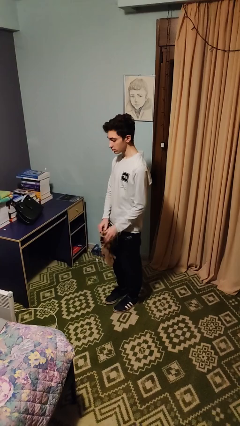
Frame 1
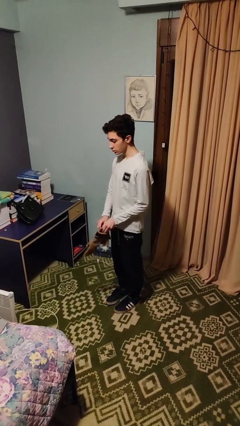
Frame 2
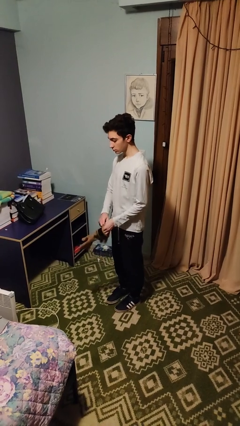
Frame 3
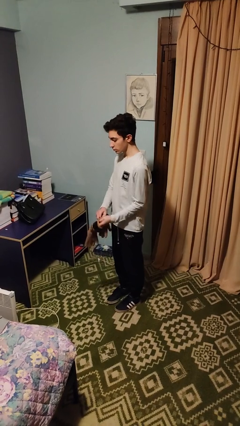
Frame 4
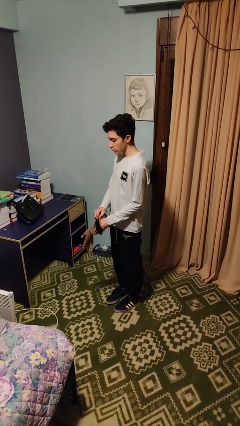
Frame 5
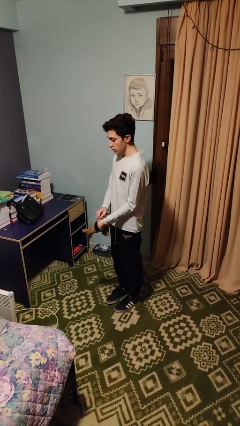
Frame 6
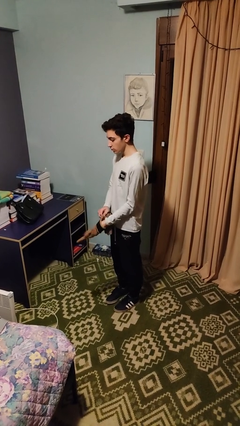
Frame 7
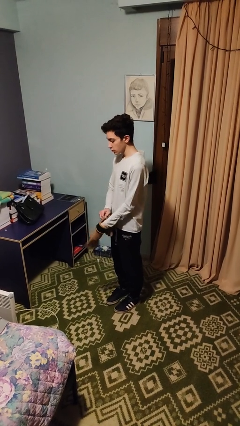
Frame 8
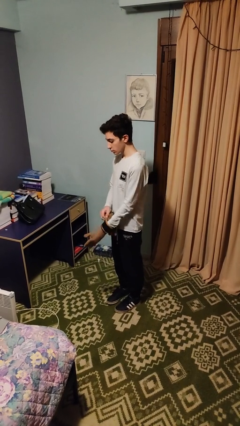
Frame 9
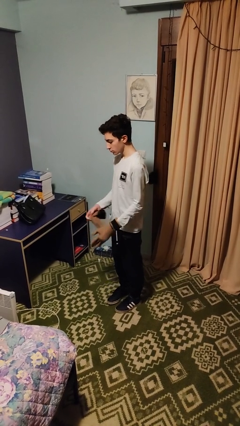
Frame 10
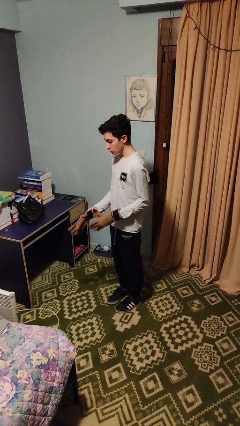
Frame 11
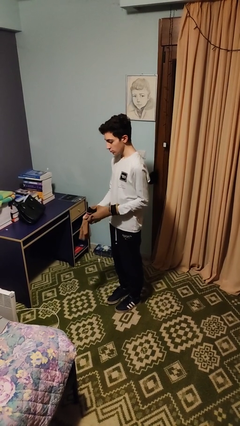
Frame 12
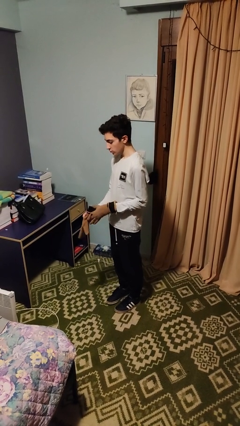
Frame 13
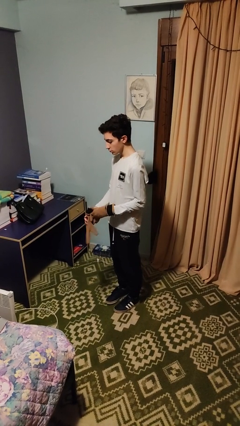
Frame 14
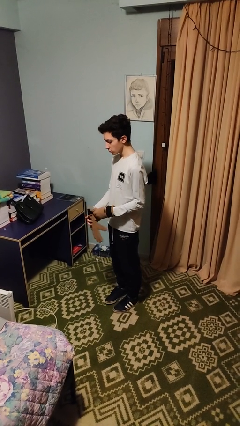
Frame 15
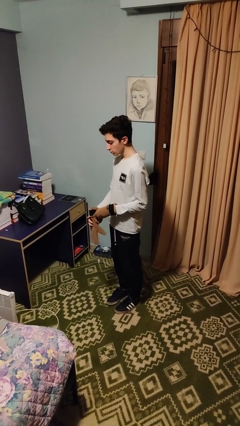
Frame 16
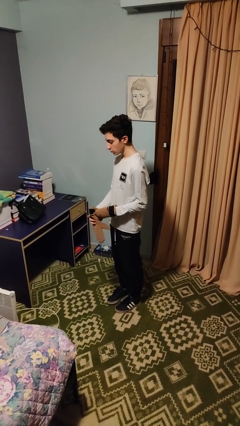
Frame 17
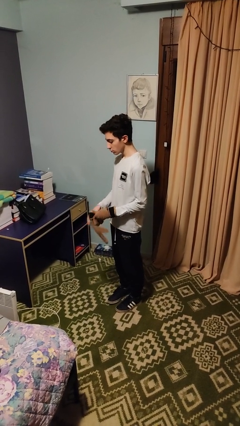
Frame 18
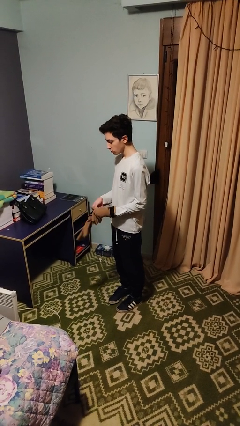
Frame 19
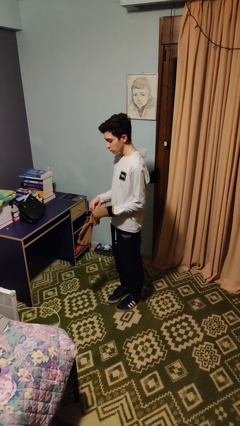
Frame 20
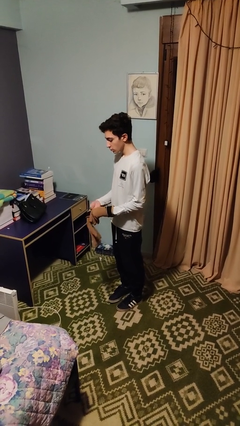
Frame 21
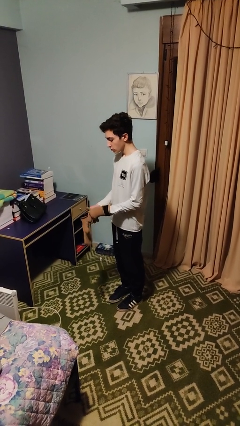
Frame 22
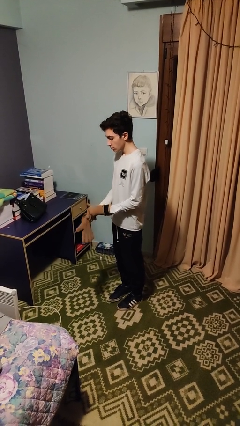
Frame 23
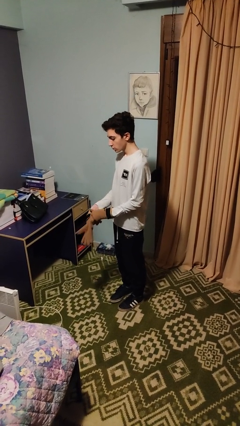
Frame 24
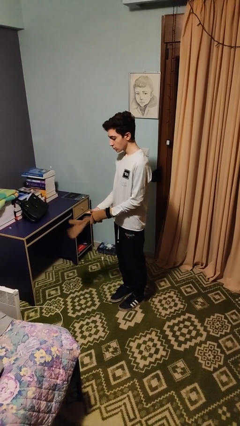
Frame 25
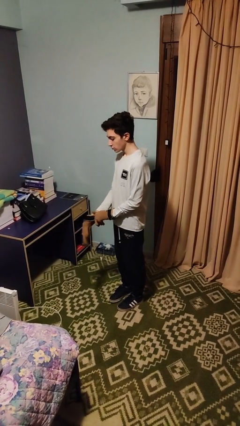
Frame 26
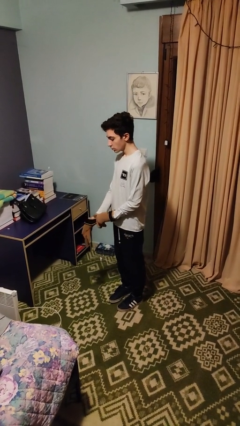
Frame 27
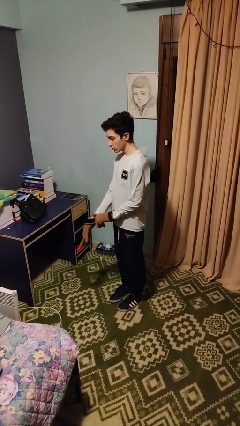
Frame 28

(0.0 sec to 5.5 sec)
person puts on gloves

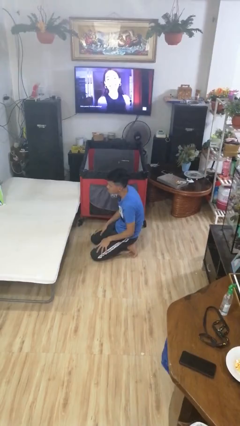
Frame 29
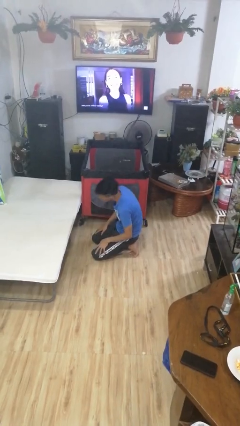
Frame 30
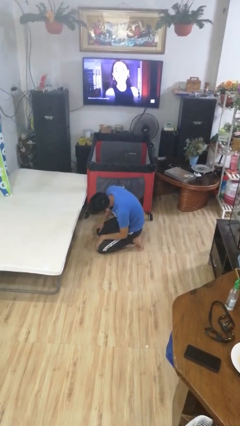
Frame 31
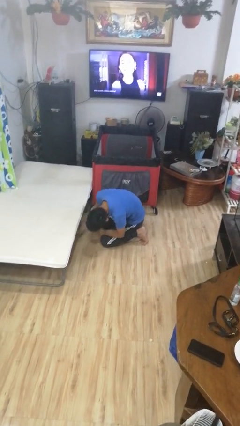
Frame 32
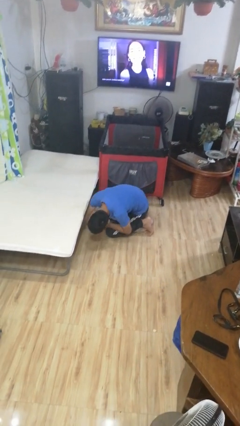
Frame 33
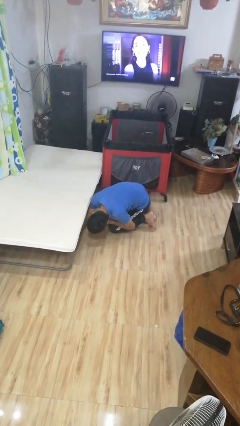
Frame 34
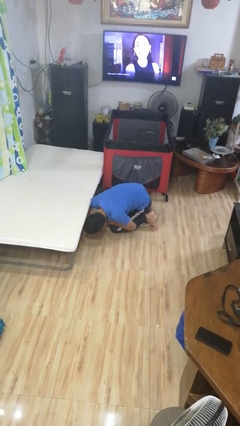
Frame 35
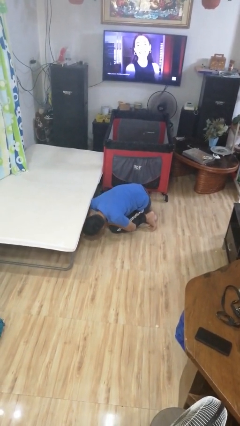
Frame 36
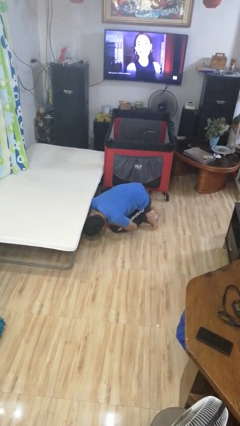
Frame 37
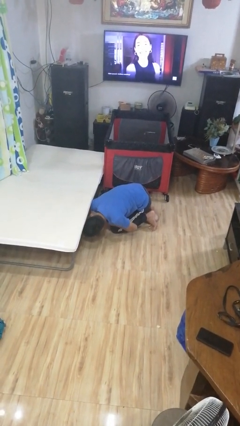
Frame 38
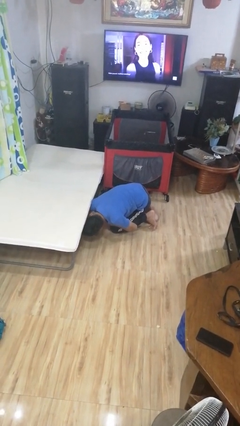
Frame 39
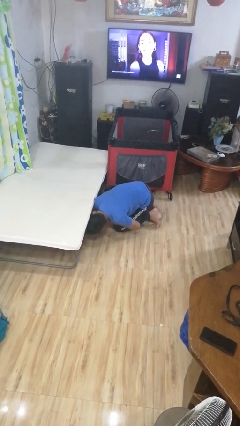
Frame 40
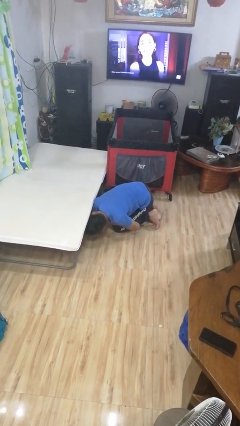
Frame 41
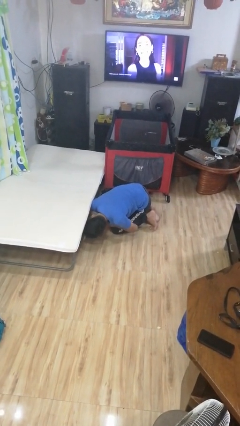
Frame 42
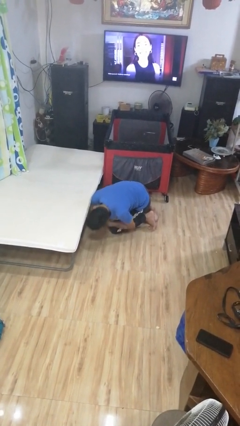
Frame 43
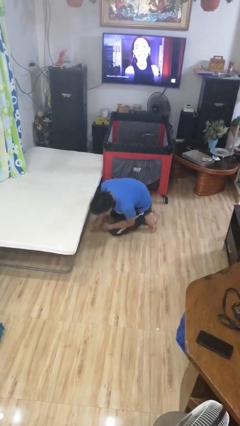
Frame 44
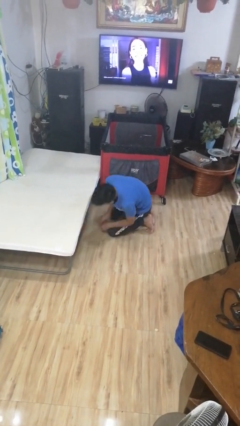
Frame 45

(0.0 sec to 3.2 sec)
person searches under bed

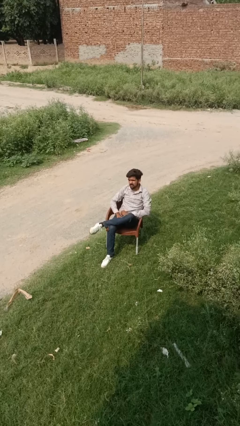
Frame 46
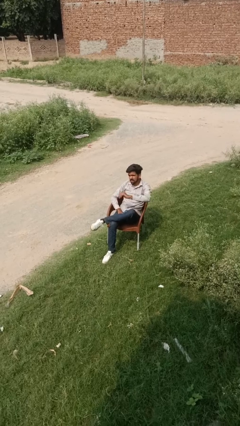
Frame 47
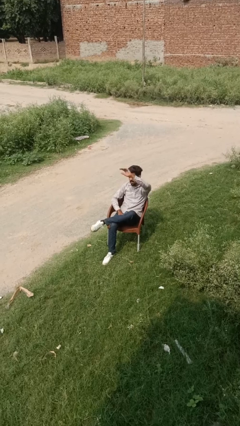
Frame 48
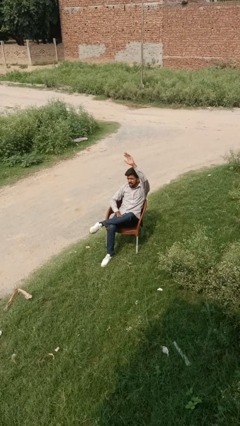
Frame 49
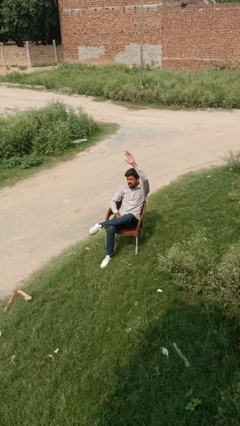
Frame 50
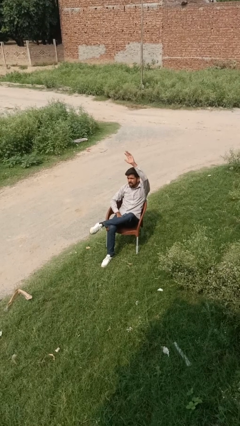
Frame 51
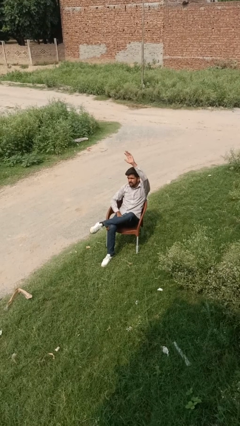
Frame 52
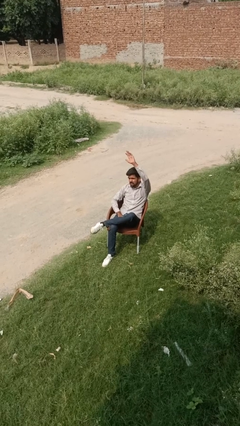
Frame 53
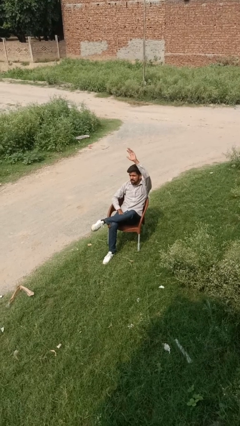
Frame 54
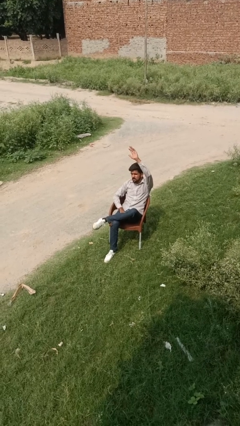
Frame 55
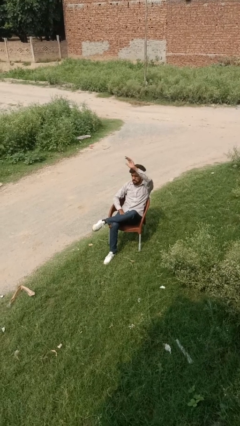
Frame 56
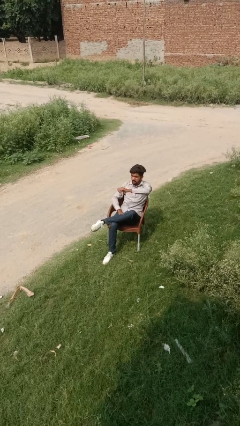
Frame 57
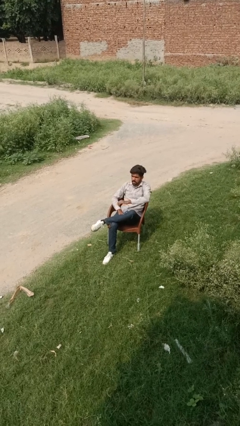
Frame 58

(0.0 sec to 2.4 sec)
person gestures raise hand

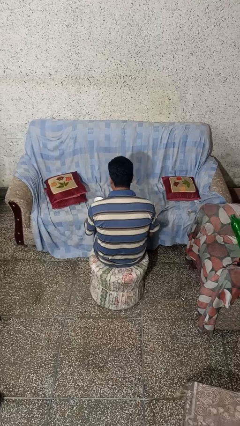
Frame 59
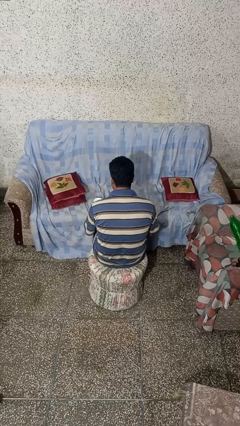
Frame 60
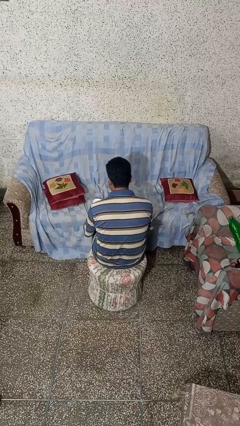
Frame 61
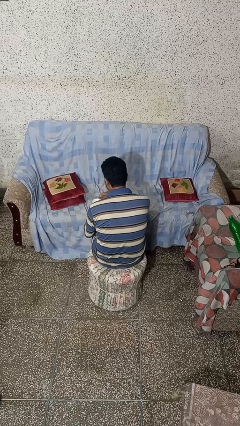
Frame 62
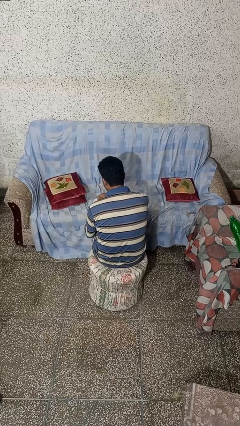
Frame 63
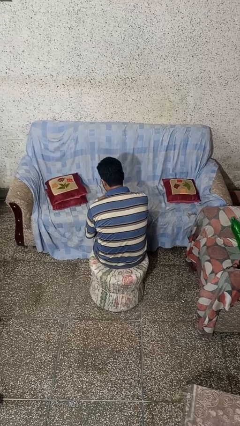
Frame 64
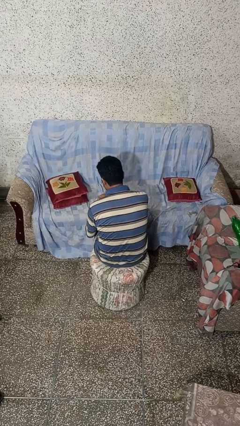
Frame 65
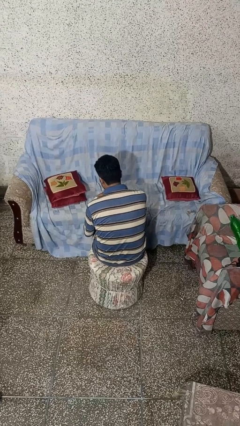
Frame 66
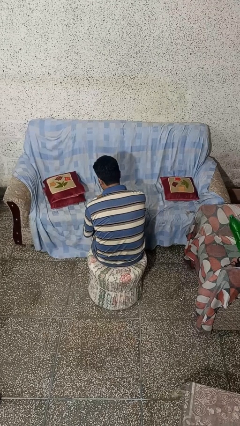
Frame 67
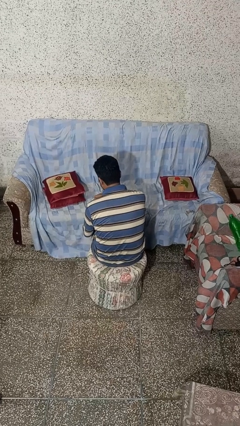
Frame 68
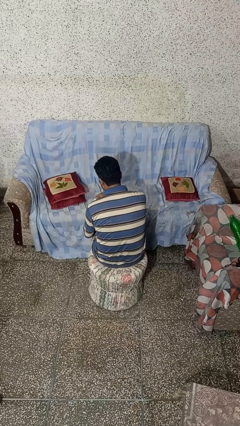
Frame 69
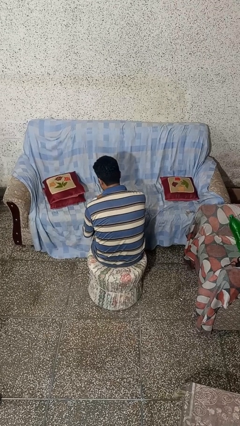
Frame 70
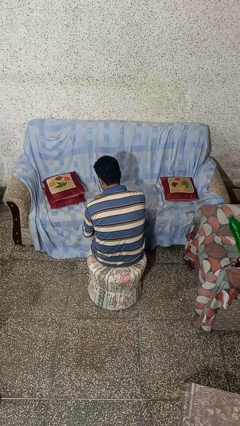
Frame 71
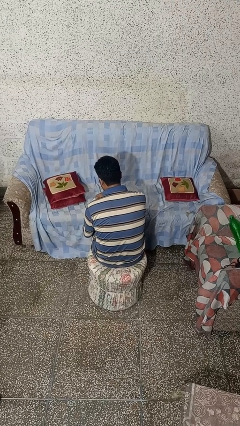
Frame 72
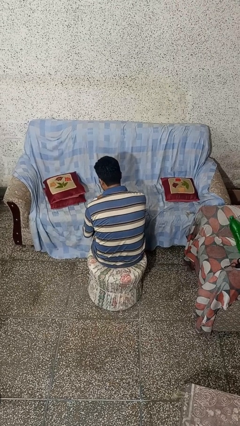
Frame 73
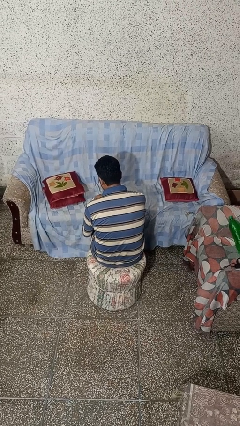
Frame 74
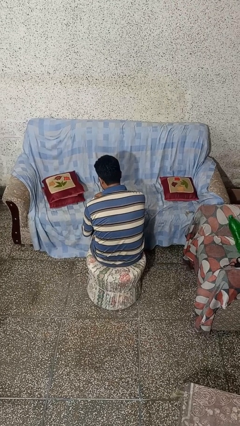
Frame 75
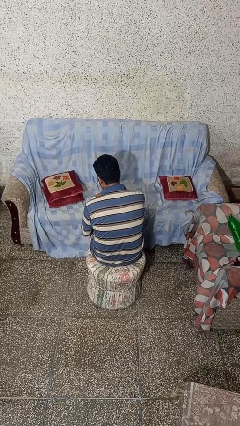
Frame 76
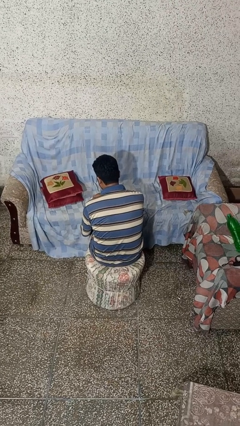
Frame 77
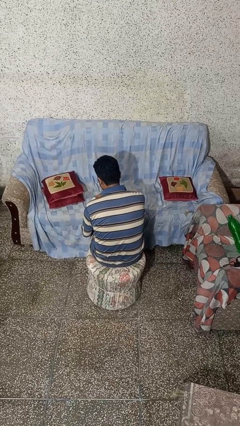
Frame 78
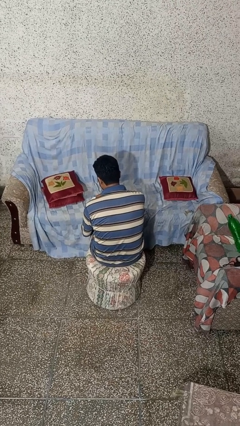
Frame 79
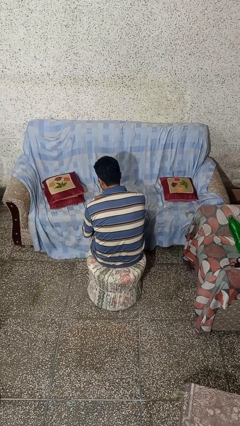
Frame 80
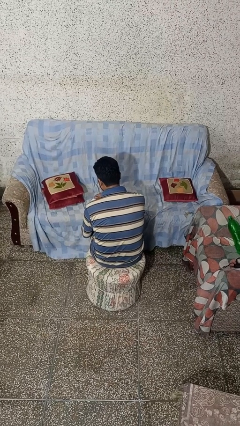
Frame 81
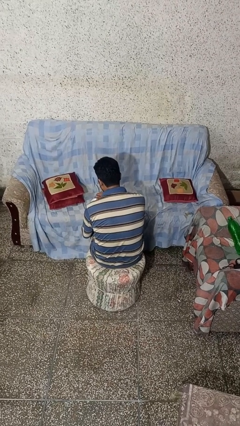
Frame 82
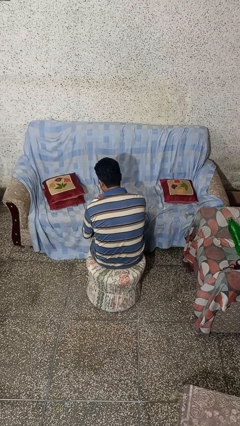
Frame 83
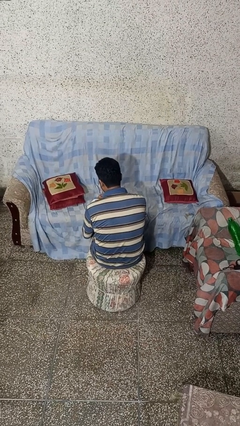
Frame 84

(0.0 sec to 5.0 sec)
person stirs mug

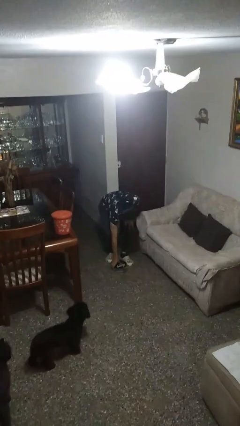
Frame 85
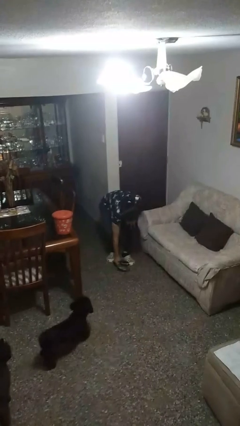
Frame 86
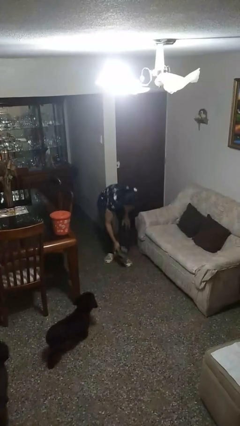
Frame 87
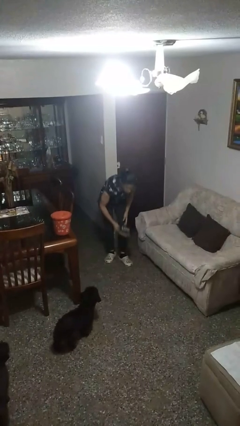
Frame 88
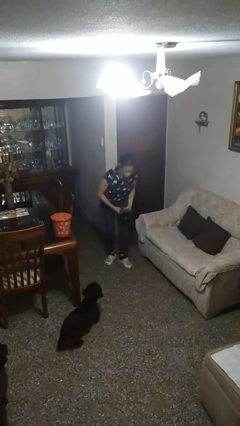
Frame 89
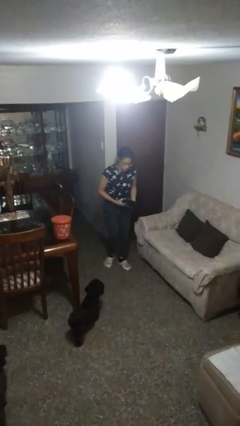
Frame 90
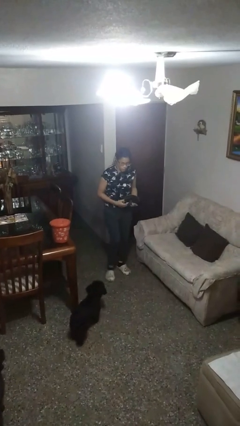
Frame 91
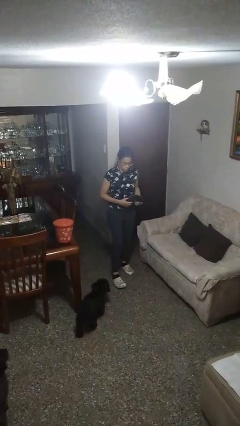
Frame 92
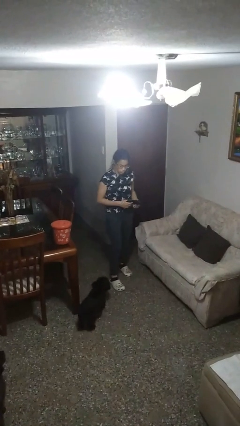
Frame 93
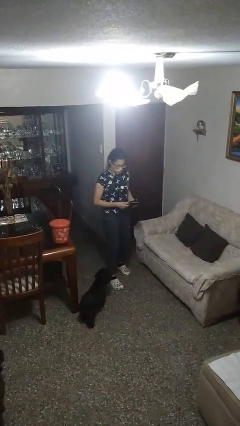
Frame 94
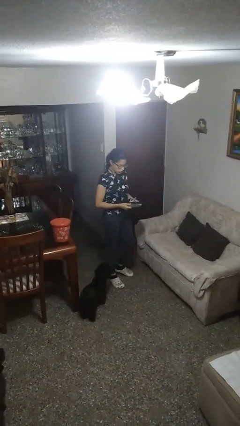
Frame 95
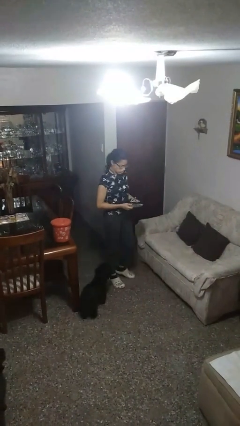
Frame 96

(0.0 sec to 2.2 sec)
person picks up object from floor
